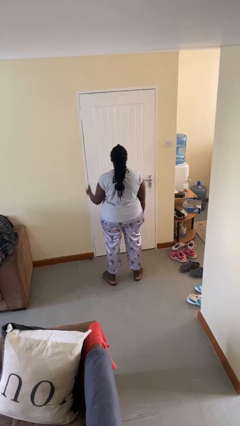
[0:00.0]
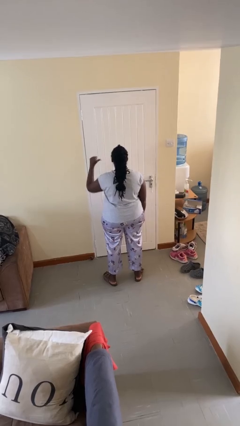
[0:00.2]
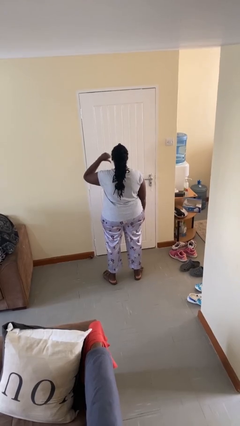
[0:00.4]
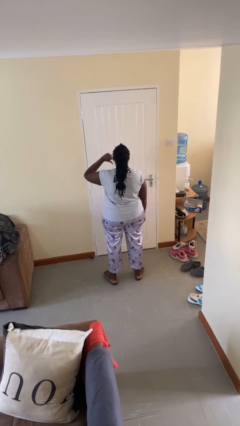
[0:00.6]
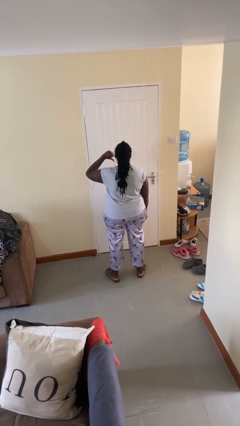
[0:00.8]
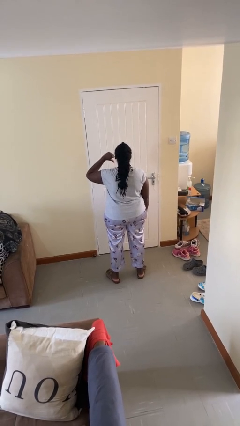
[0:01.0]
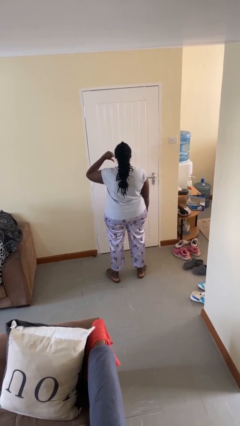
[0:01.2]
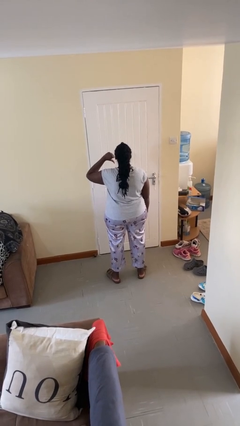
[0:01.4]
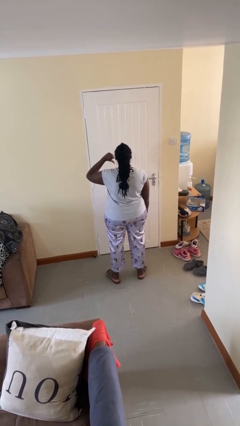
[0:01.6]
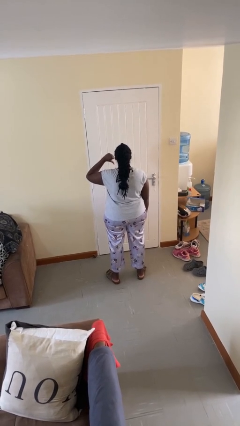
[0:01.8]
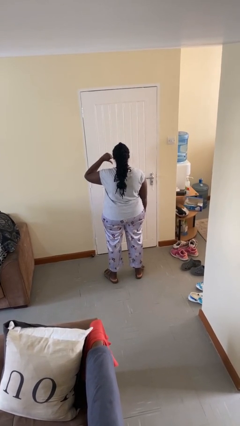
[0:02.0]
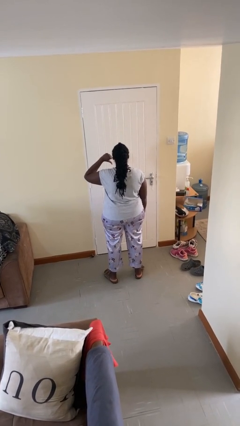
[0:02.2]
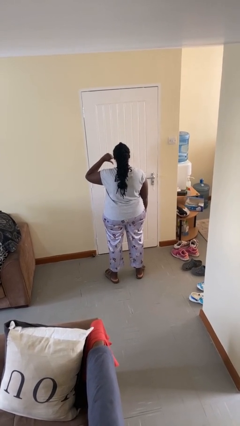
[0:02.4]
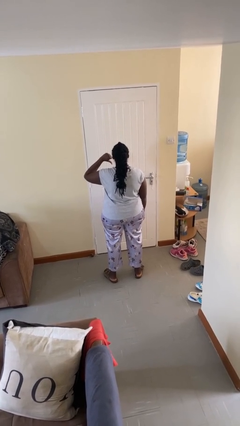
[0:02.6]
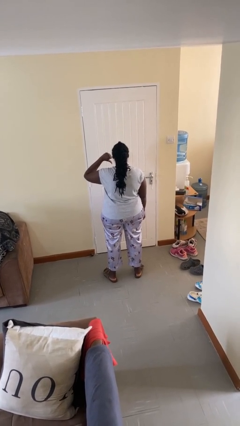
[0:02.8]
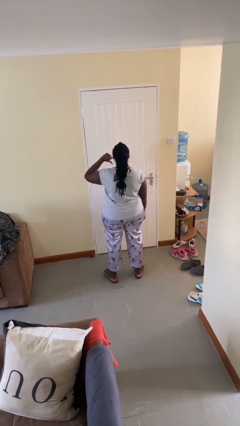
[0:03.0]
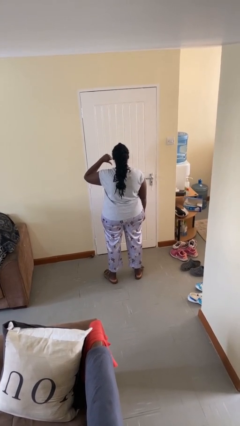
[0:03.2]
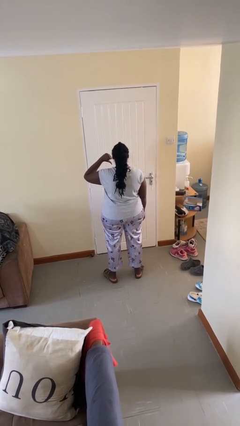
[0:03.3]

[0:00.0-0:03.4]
person gestures thumbs down

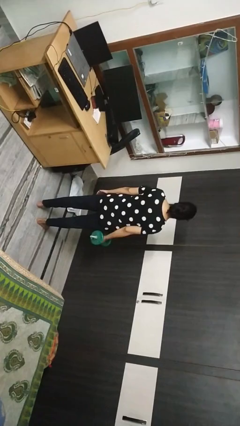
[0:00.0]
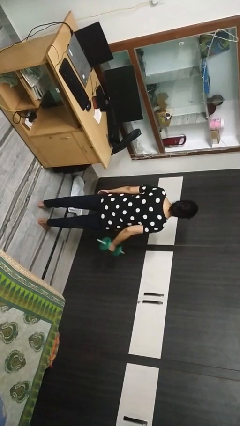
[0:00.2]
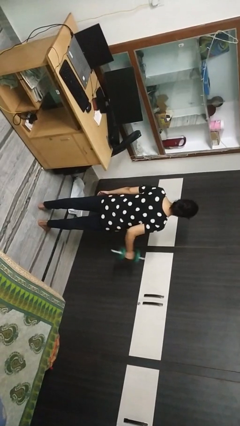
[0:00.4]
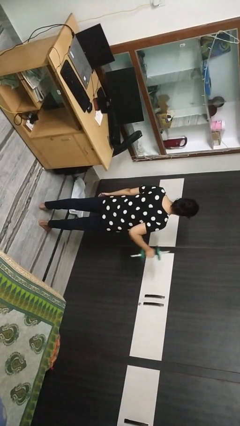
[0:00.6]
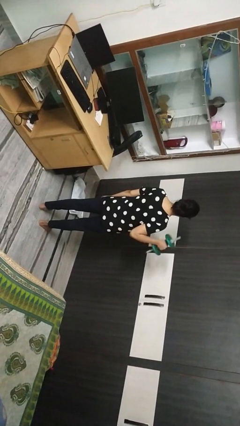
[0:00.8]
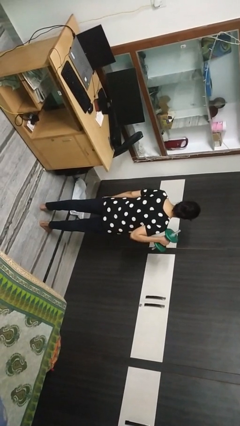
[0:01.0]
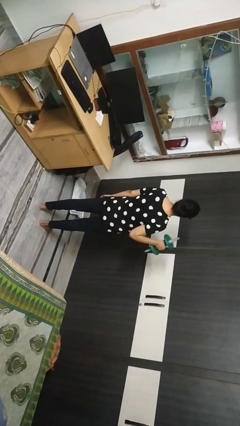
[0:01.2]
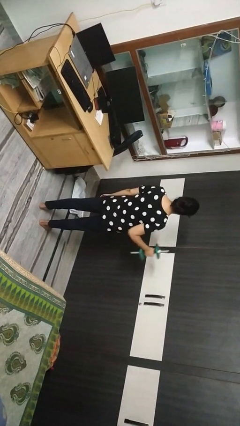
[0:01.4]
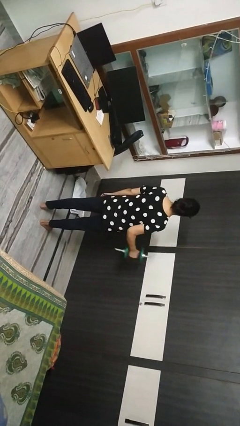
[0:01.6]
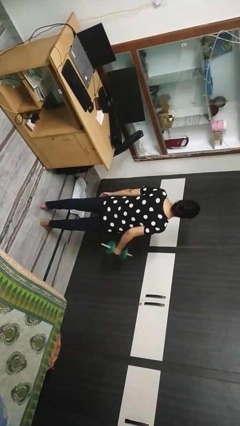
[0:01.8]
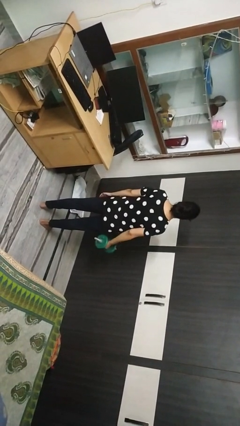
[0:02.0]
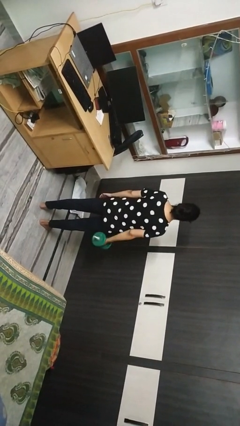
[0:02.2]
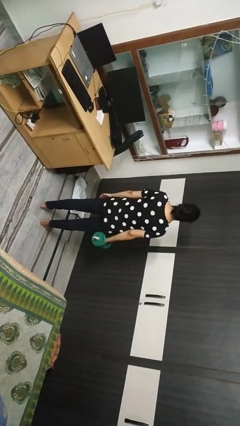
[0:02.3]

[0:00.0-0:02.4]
person lifts dumbbells

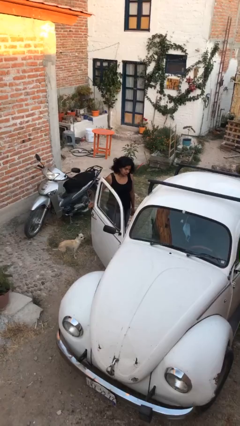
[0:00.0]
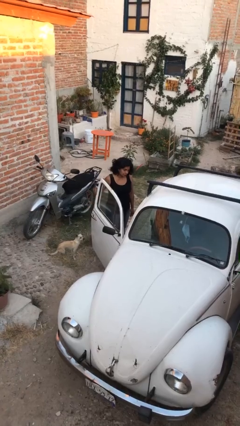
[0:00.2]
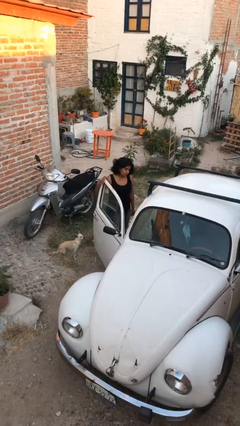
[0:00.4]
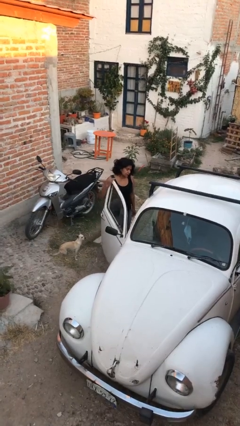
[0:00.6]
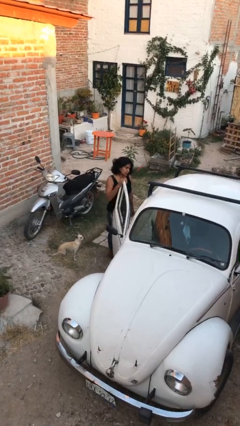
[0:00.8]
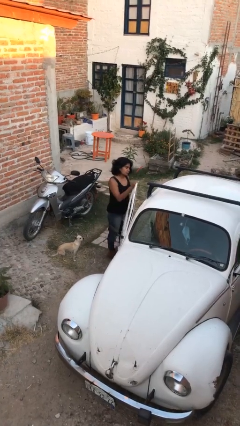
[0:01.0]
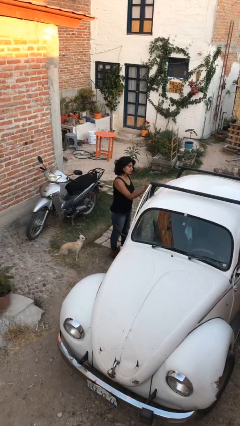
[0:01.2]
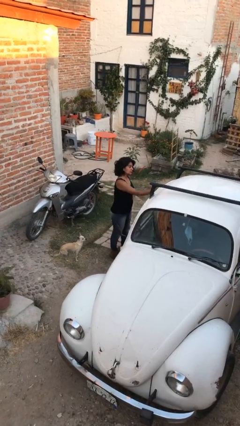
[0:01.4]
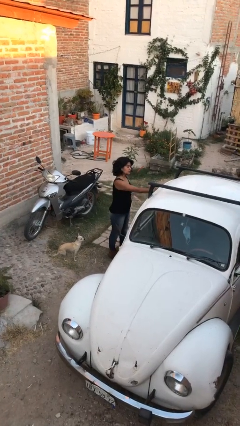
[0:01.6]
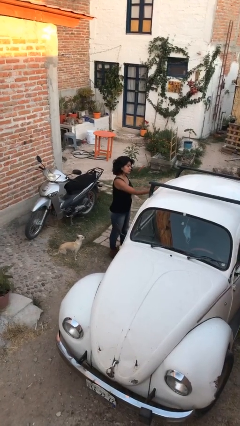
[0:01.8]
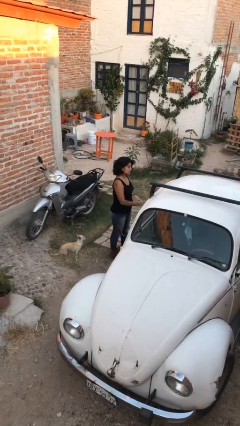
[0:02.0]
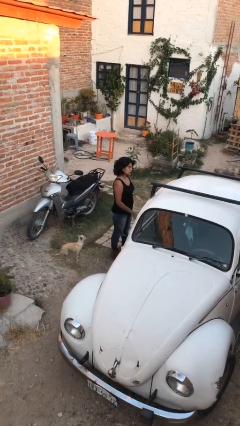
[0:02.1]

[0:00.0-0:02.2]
person closes car door

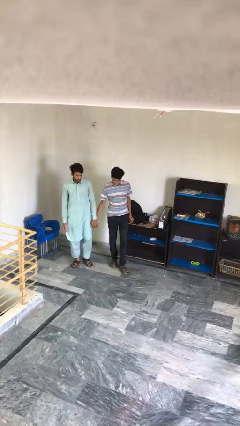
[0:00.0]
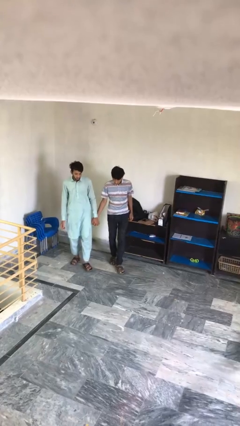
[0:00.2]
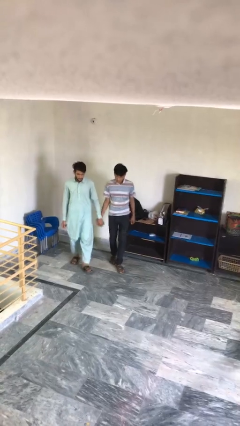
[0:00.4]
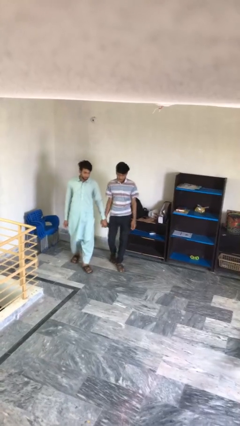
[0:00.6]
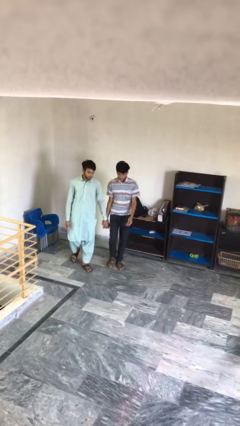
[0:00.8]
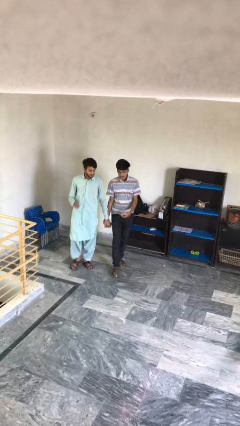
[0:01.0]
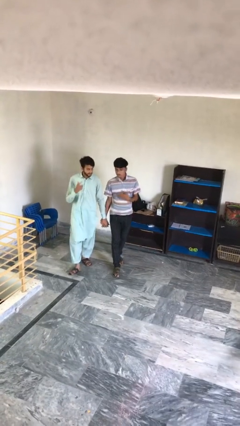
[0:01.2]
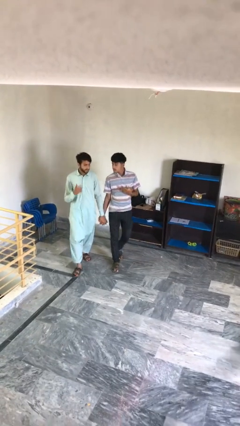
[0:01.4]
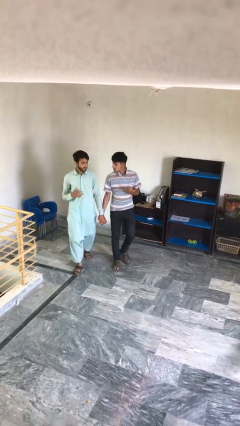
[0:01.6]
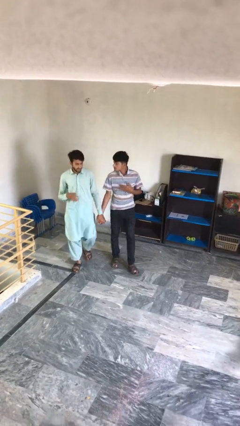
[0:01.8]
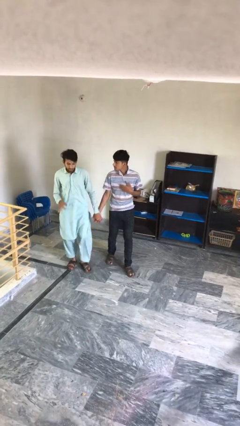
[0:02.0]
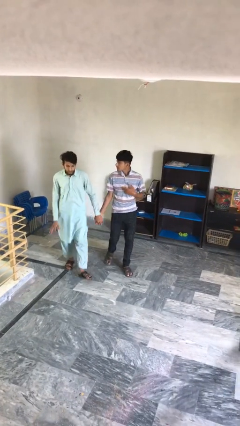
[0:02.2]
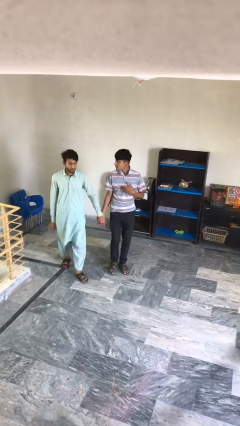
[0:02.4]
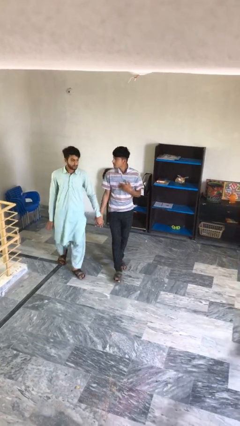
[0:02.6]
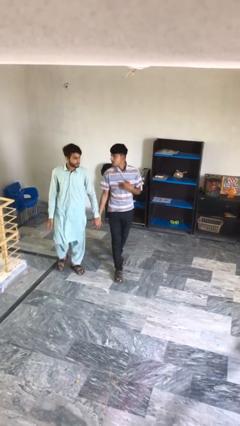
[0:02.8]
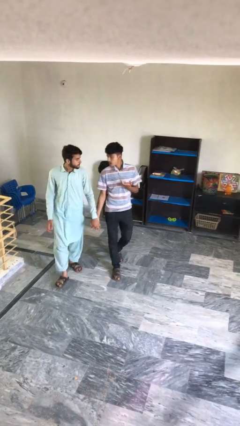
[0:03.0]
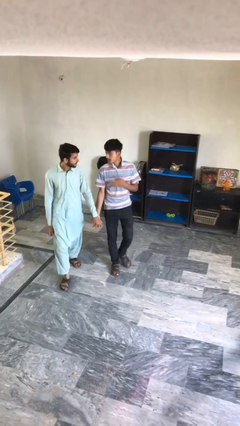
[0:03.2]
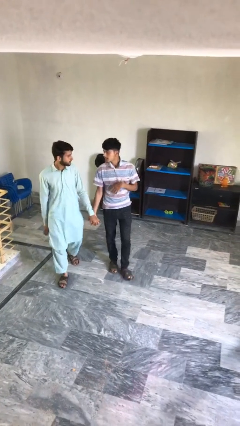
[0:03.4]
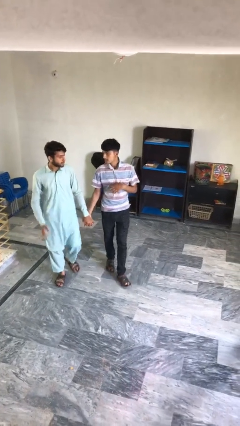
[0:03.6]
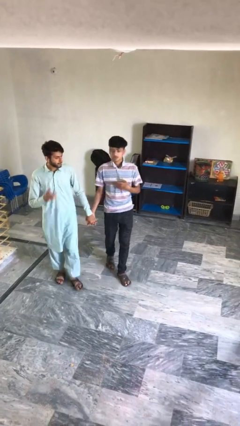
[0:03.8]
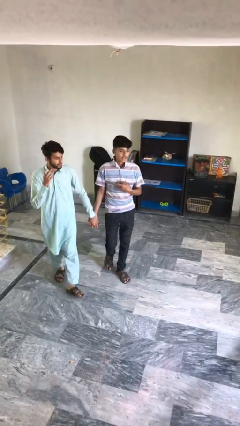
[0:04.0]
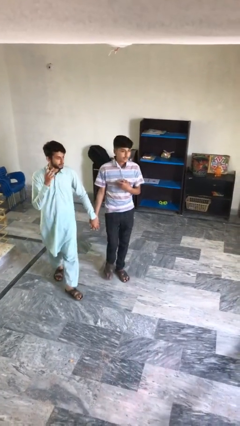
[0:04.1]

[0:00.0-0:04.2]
person holds hand

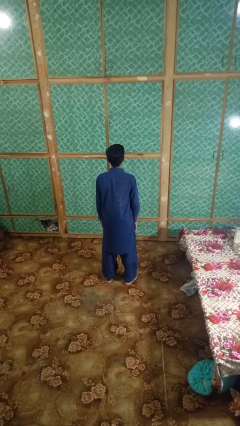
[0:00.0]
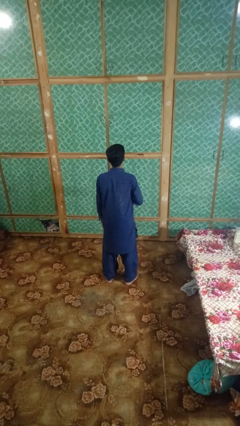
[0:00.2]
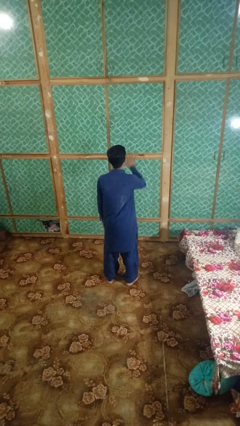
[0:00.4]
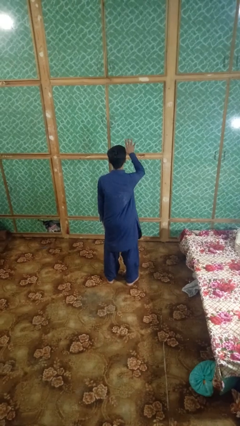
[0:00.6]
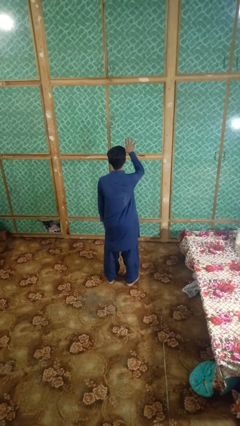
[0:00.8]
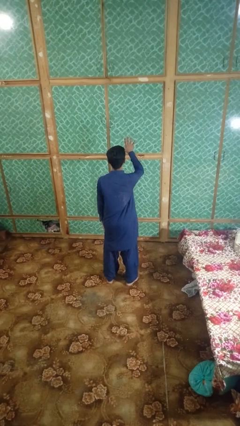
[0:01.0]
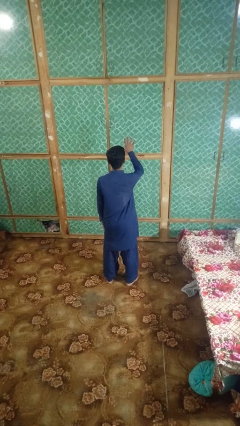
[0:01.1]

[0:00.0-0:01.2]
person gestures number five

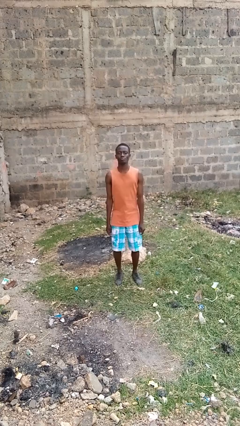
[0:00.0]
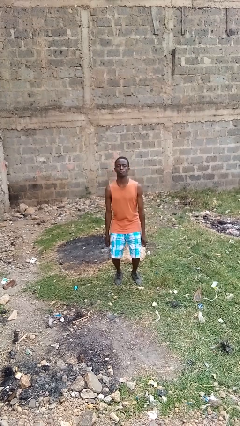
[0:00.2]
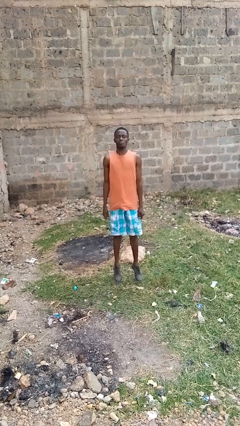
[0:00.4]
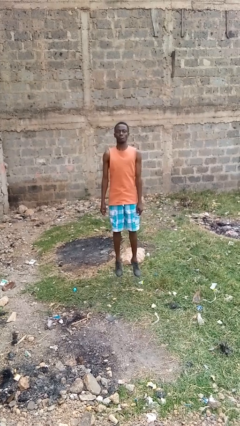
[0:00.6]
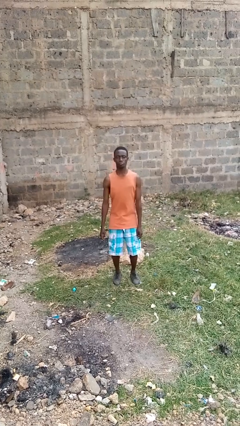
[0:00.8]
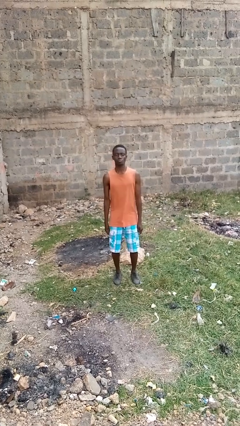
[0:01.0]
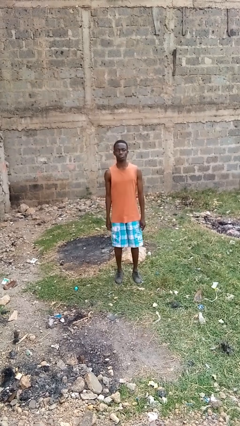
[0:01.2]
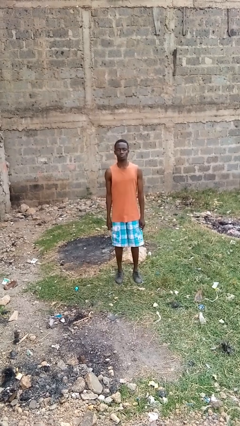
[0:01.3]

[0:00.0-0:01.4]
person jumps

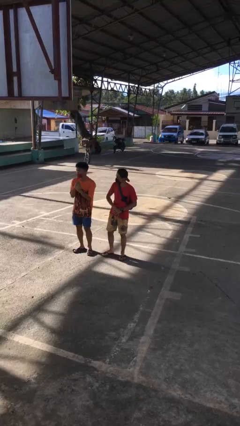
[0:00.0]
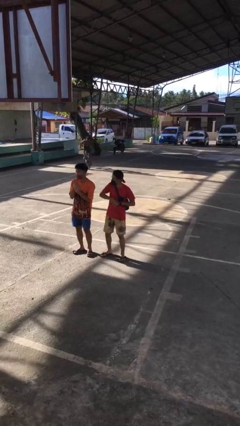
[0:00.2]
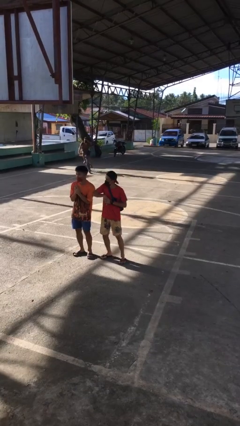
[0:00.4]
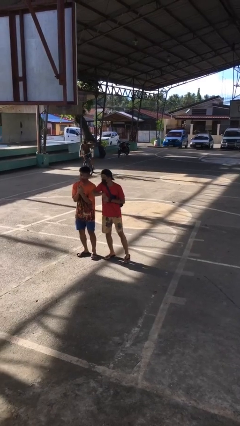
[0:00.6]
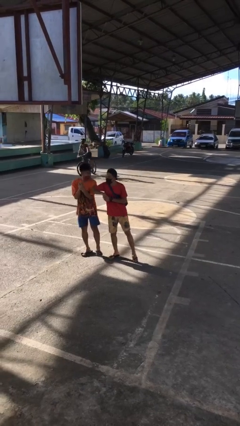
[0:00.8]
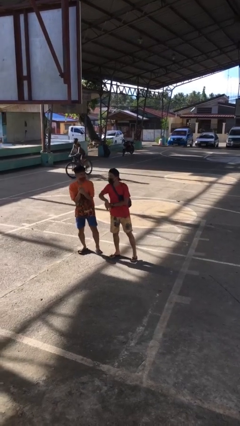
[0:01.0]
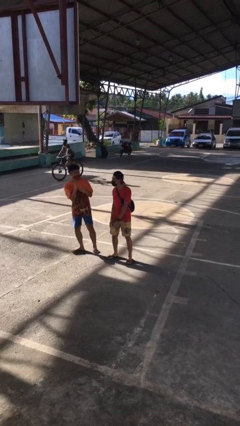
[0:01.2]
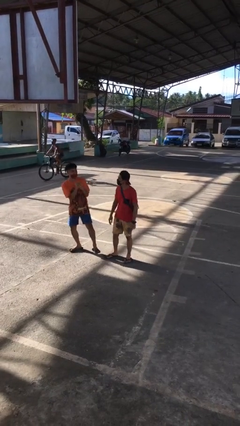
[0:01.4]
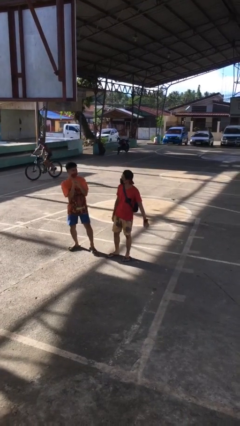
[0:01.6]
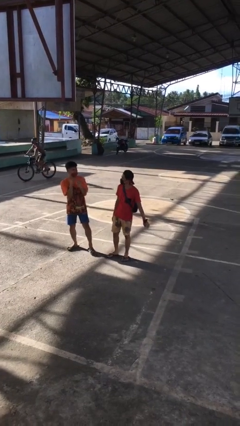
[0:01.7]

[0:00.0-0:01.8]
person nudges person with elbow

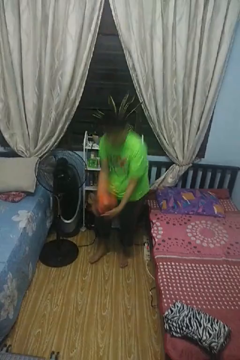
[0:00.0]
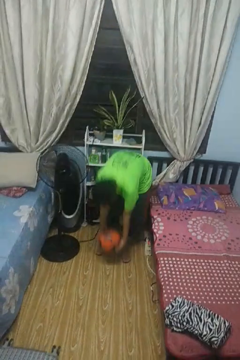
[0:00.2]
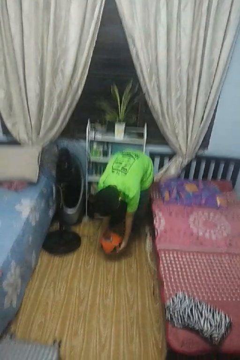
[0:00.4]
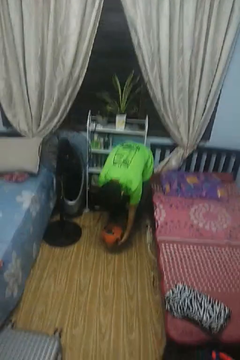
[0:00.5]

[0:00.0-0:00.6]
person catches dropped object

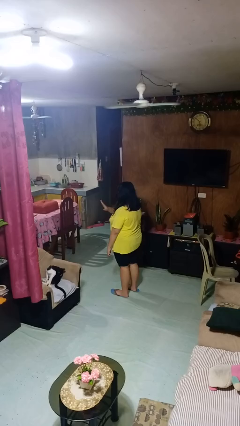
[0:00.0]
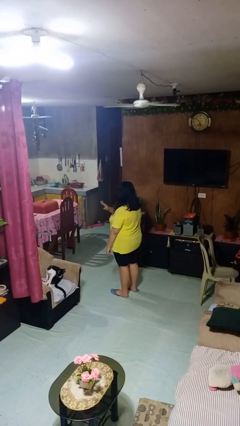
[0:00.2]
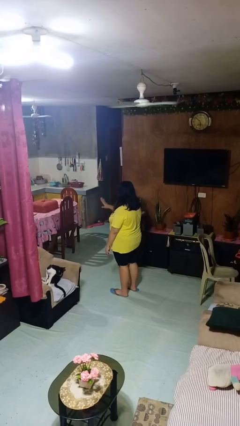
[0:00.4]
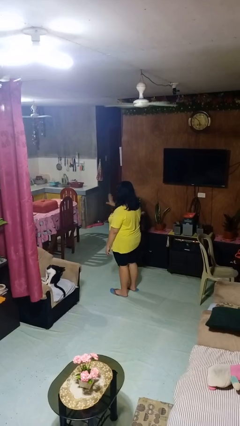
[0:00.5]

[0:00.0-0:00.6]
person gestures swipe right
